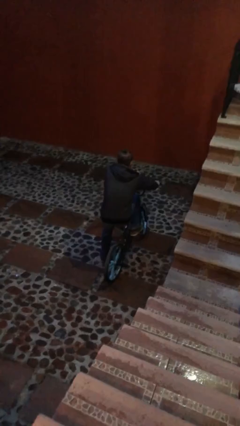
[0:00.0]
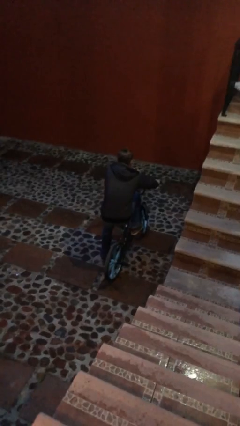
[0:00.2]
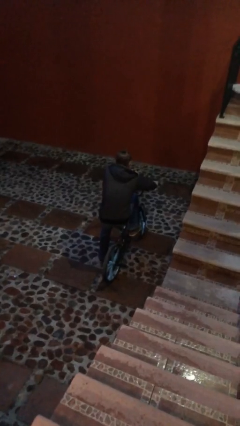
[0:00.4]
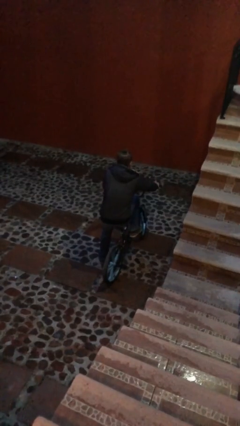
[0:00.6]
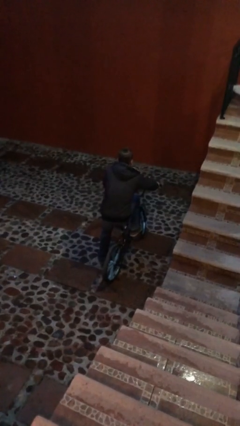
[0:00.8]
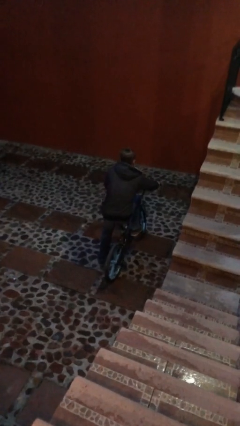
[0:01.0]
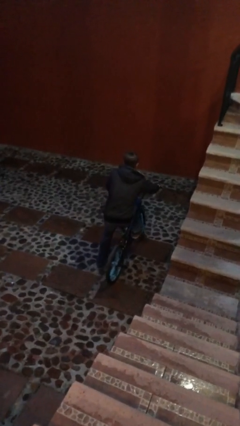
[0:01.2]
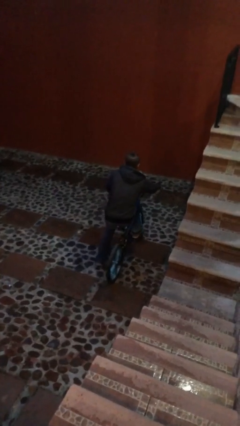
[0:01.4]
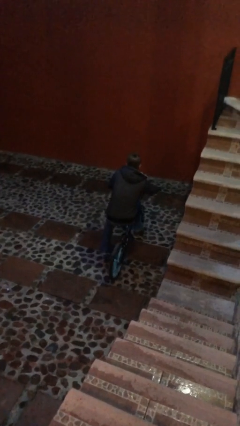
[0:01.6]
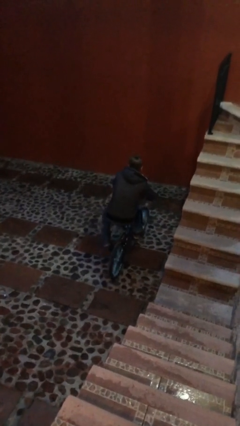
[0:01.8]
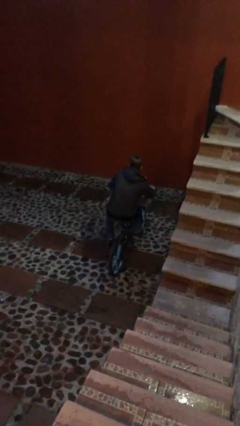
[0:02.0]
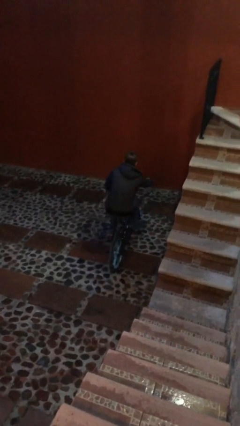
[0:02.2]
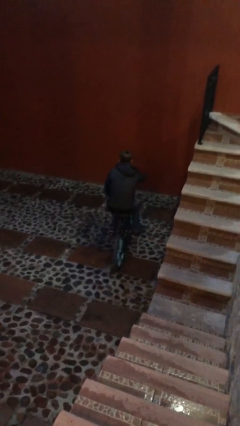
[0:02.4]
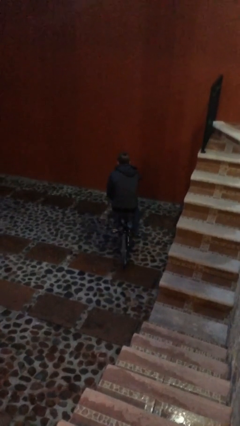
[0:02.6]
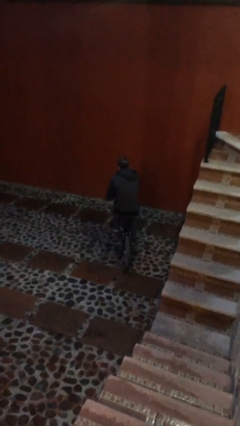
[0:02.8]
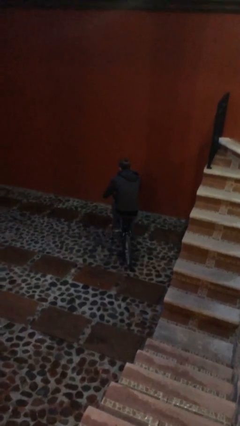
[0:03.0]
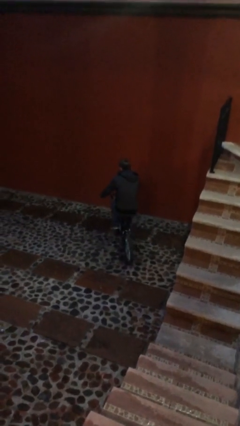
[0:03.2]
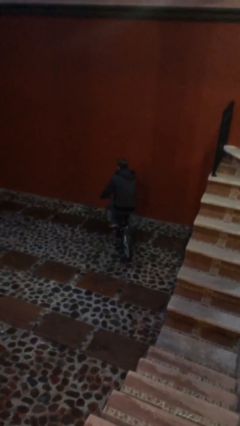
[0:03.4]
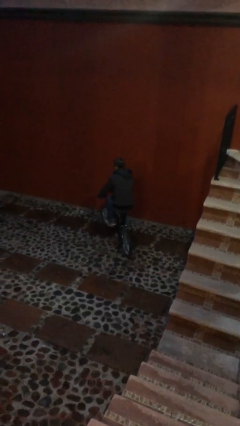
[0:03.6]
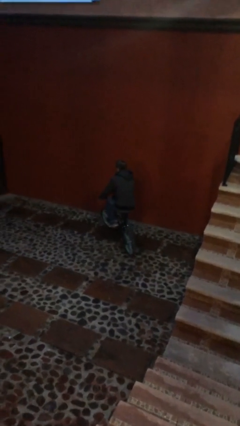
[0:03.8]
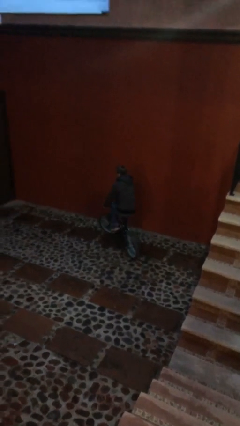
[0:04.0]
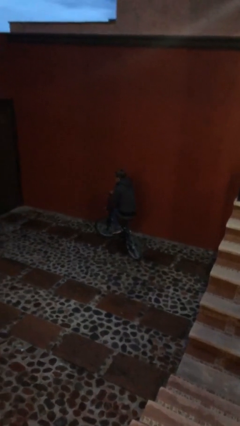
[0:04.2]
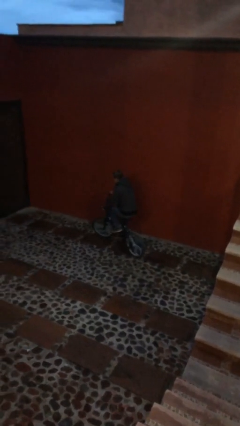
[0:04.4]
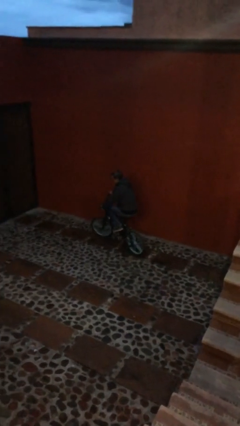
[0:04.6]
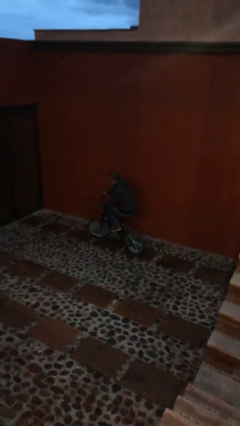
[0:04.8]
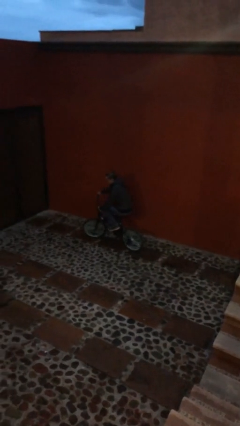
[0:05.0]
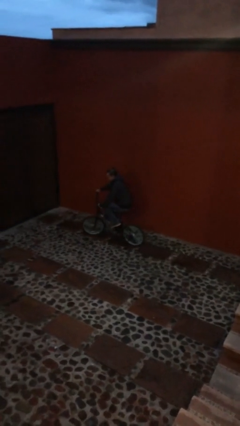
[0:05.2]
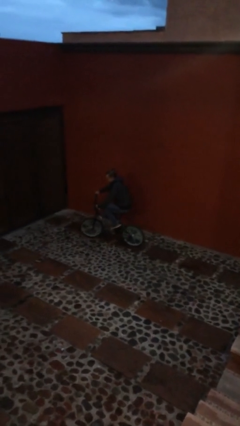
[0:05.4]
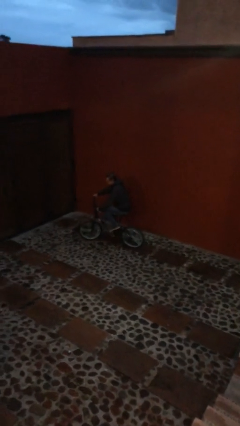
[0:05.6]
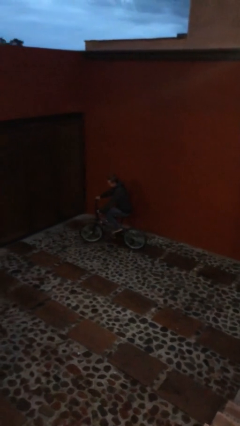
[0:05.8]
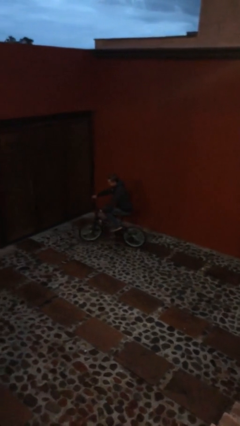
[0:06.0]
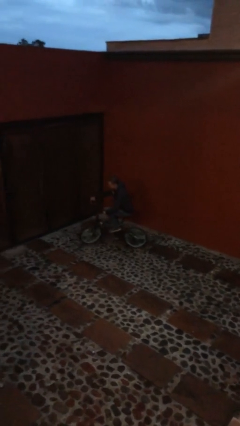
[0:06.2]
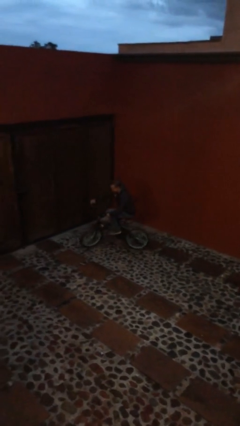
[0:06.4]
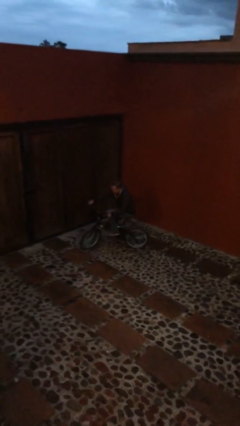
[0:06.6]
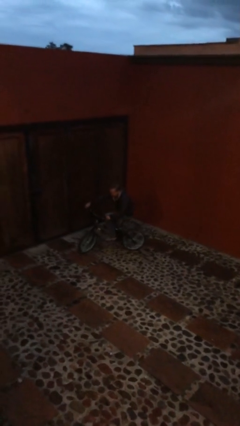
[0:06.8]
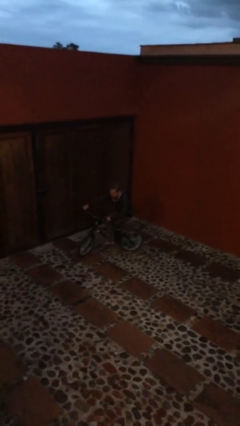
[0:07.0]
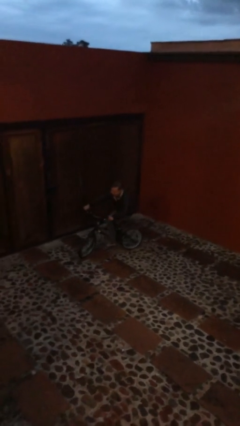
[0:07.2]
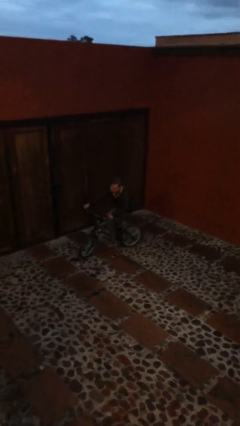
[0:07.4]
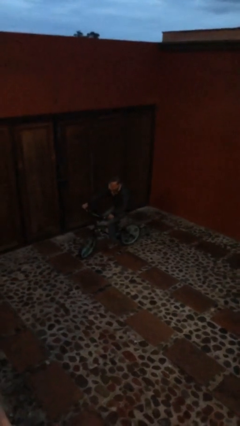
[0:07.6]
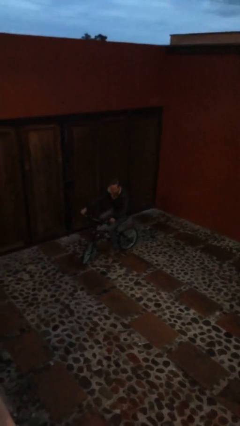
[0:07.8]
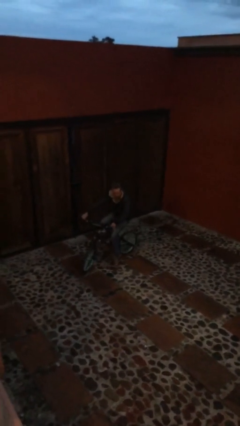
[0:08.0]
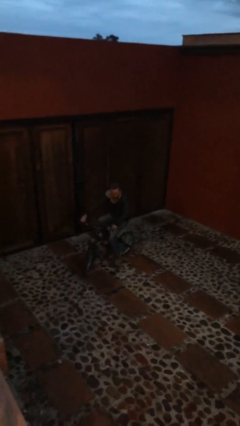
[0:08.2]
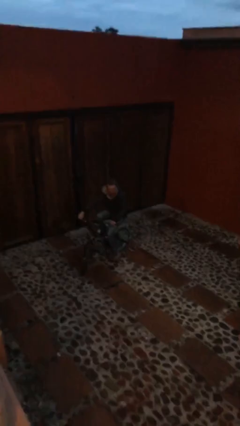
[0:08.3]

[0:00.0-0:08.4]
person rides bicycle

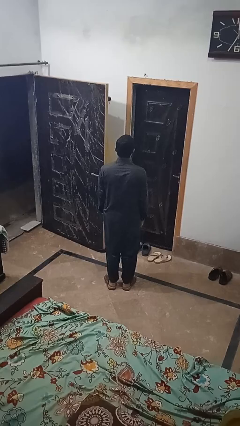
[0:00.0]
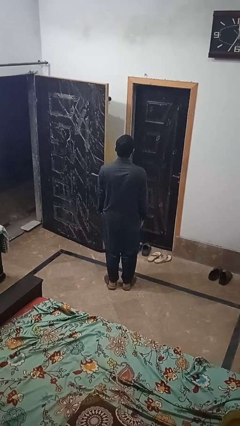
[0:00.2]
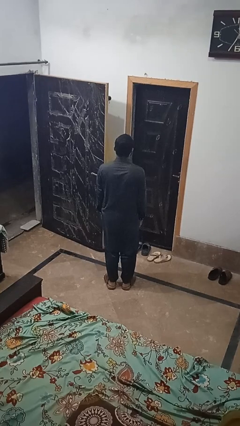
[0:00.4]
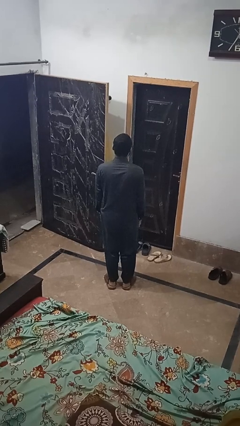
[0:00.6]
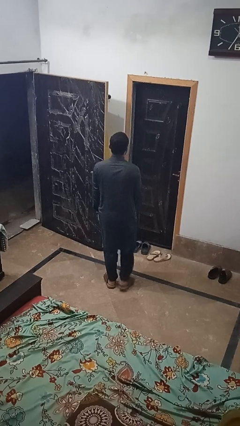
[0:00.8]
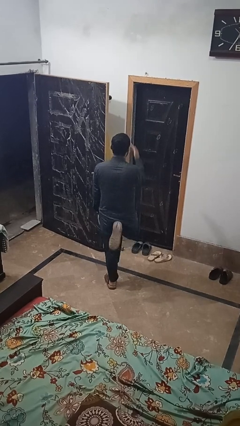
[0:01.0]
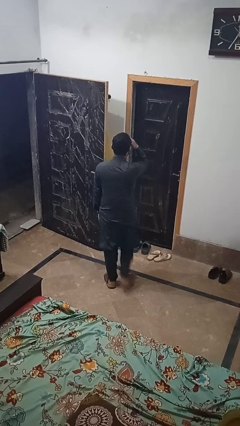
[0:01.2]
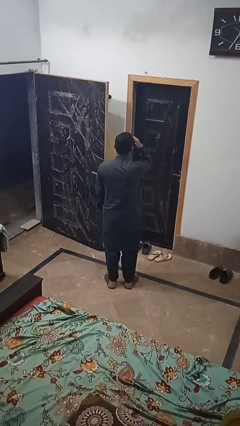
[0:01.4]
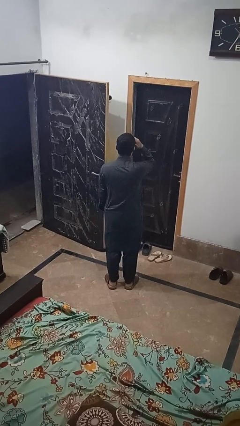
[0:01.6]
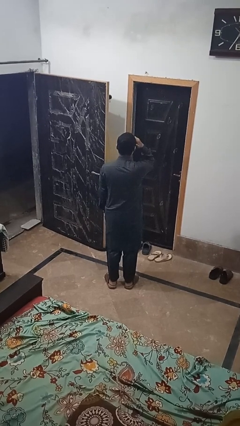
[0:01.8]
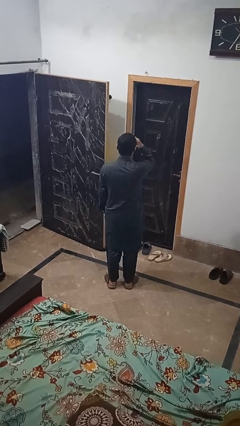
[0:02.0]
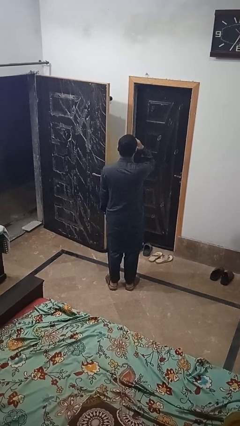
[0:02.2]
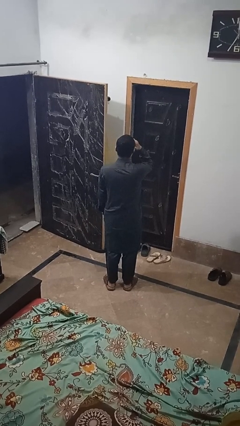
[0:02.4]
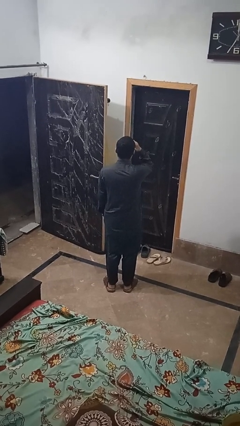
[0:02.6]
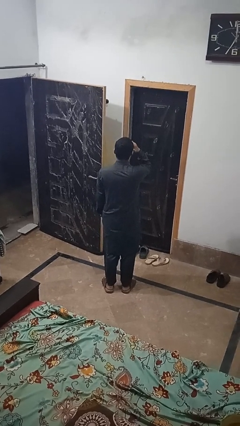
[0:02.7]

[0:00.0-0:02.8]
person salutes

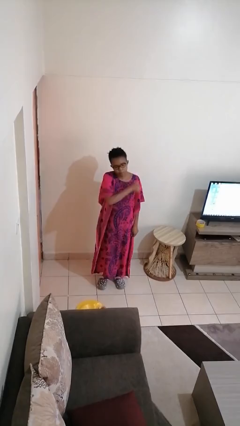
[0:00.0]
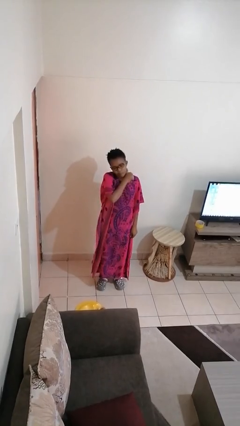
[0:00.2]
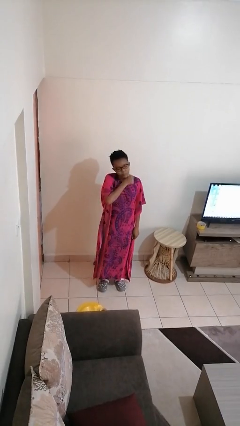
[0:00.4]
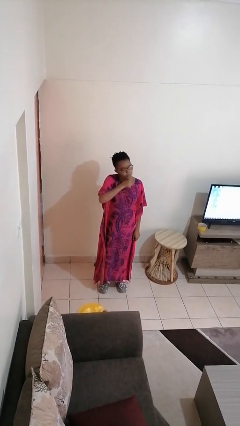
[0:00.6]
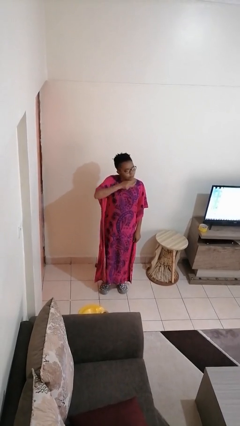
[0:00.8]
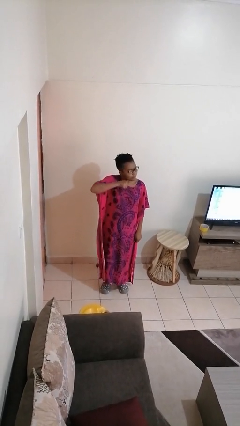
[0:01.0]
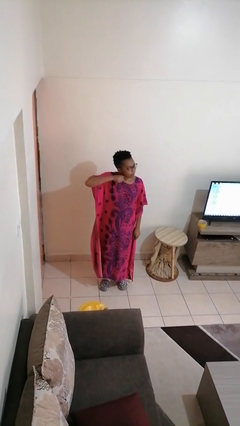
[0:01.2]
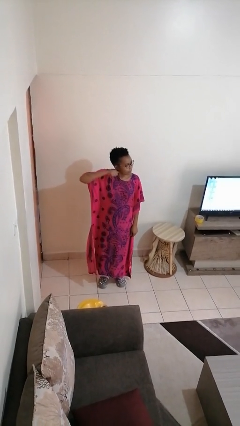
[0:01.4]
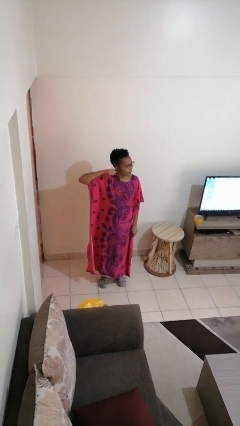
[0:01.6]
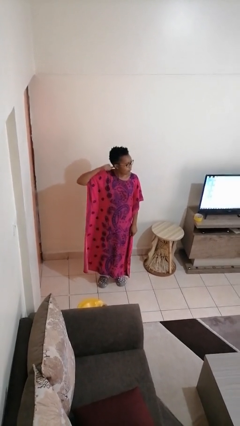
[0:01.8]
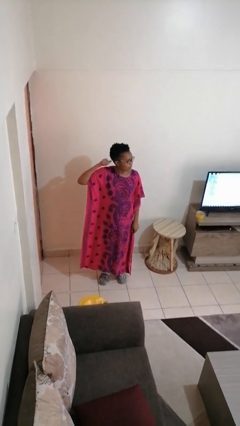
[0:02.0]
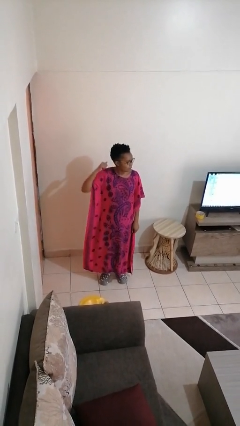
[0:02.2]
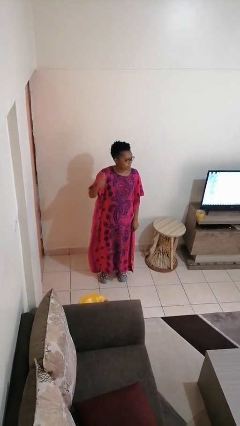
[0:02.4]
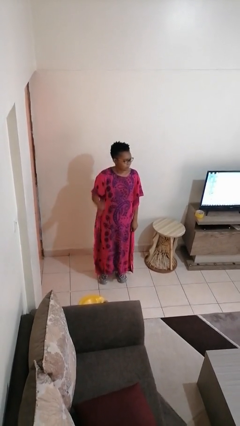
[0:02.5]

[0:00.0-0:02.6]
person gestures cut

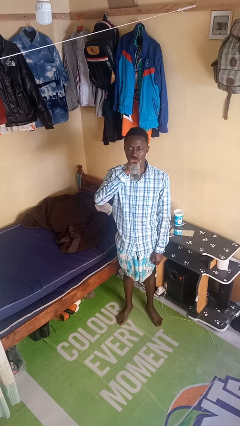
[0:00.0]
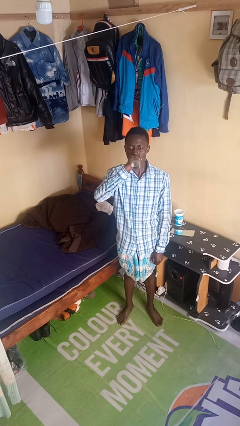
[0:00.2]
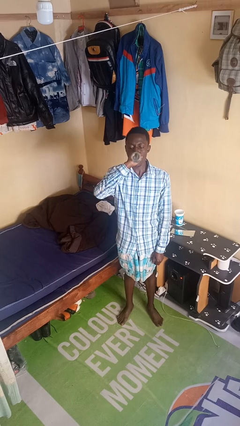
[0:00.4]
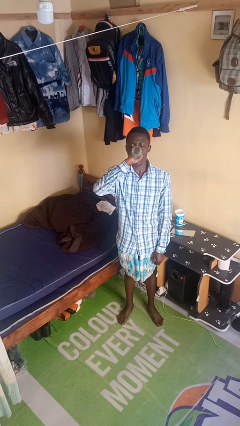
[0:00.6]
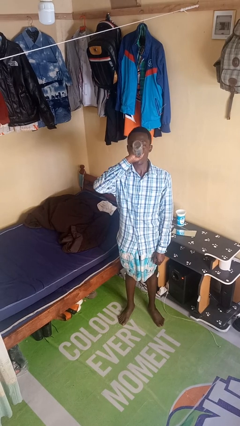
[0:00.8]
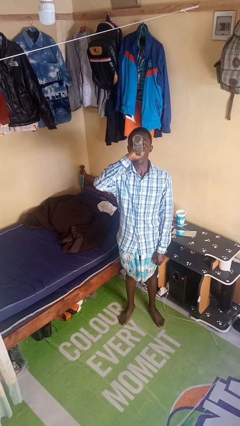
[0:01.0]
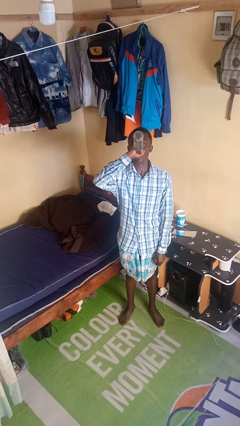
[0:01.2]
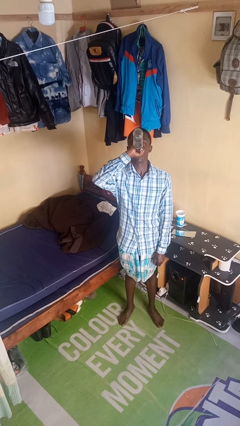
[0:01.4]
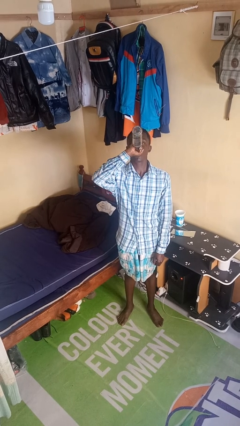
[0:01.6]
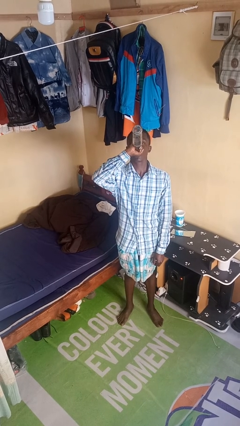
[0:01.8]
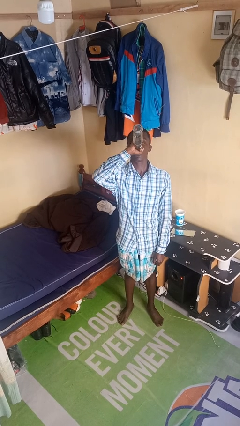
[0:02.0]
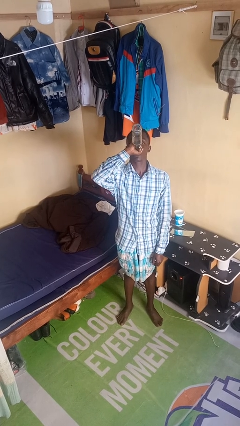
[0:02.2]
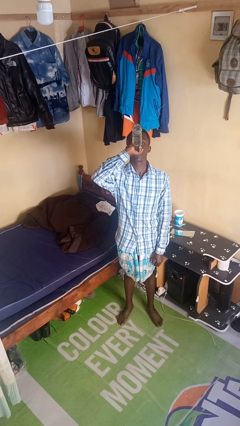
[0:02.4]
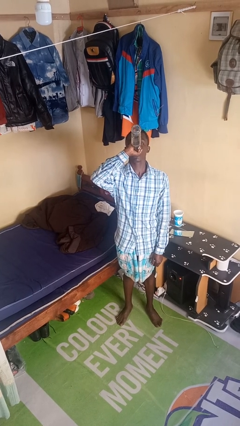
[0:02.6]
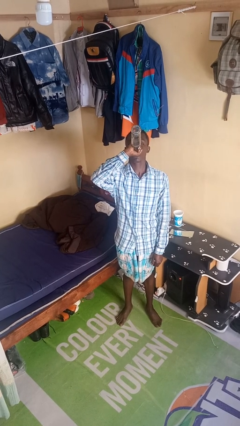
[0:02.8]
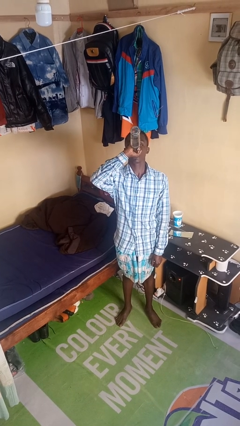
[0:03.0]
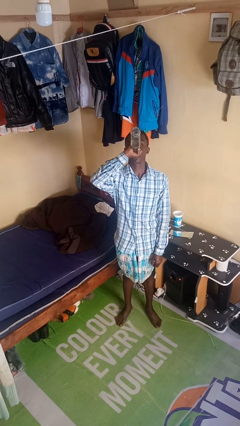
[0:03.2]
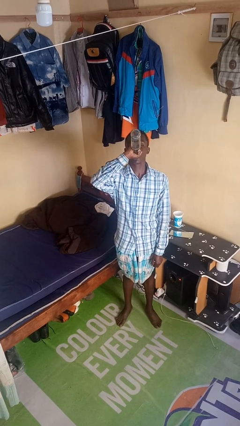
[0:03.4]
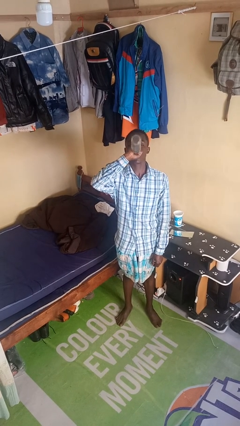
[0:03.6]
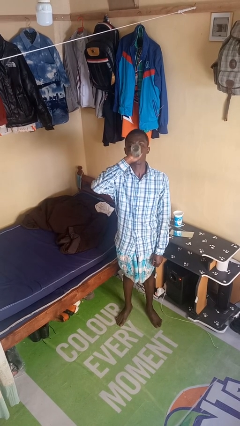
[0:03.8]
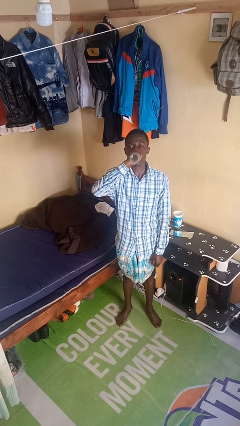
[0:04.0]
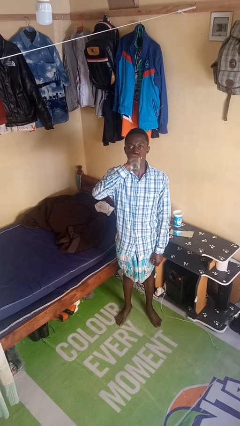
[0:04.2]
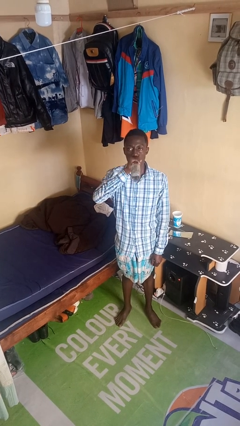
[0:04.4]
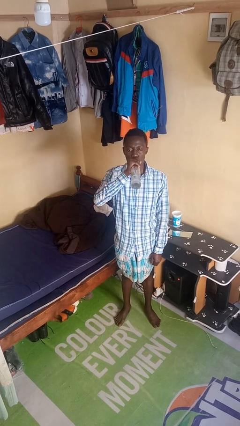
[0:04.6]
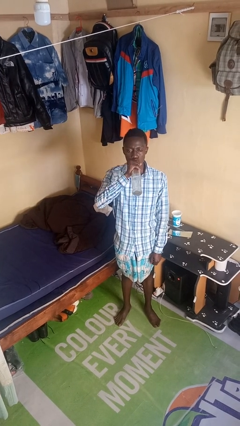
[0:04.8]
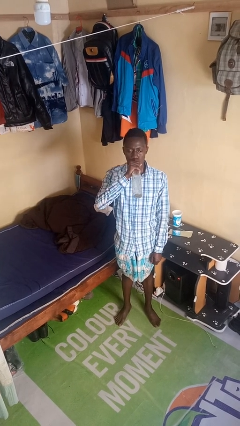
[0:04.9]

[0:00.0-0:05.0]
person drinks from bottle
